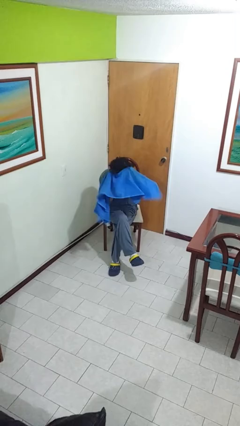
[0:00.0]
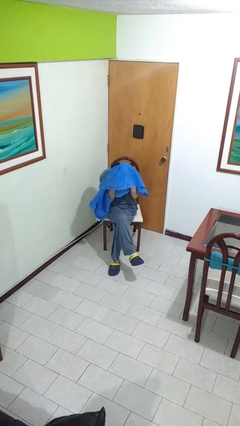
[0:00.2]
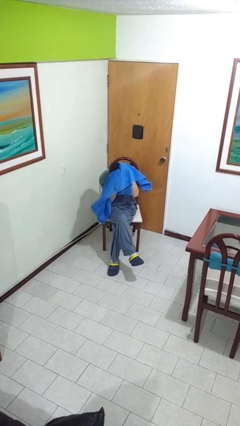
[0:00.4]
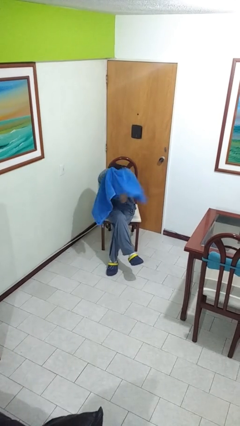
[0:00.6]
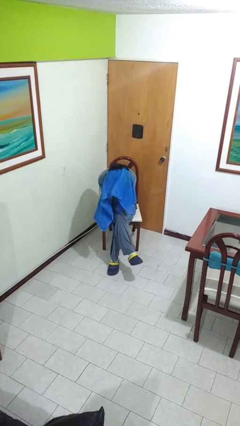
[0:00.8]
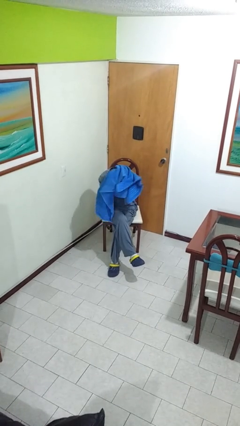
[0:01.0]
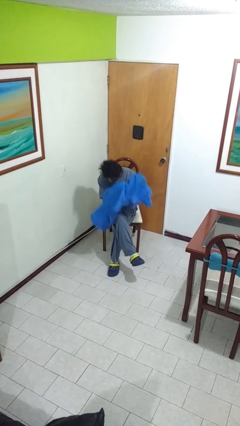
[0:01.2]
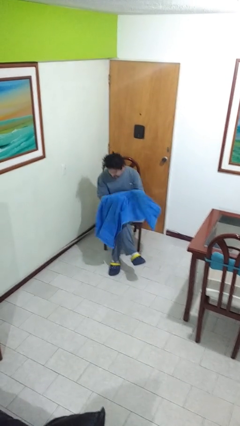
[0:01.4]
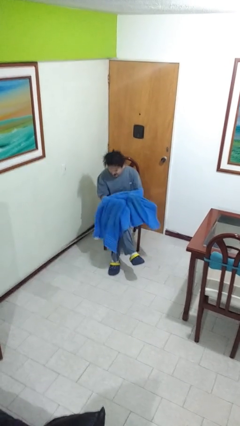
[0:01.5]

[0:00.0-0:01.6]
person dries hair with towel

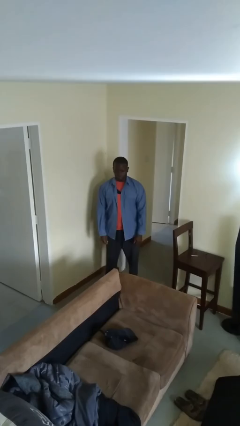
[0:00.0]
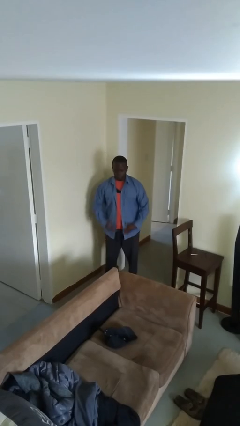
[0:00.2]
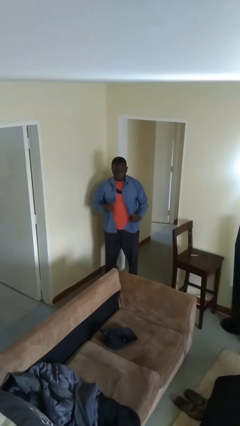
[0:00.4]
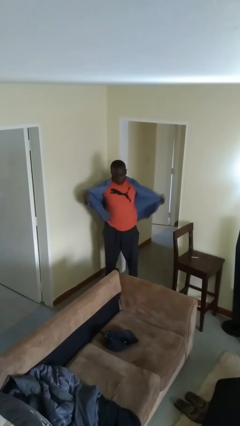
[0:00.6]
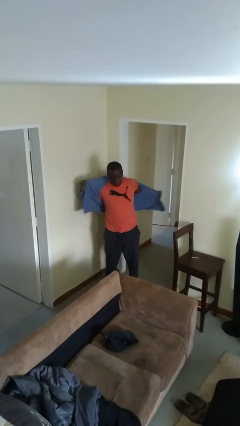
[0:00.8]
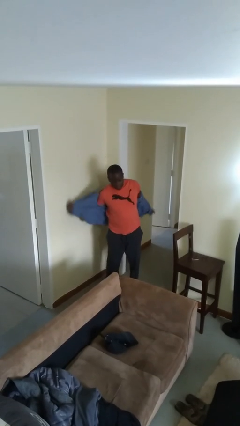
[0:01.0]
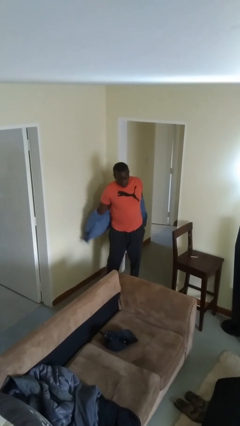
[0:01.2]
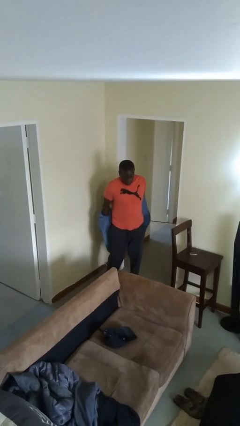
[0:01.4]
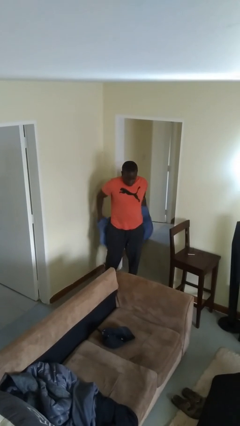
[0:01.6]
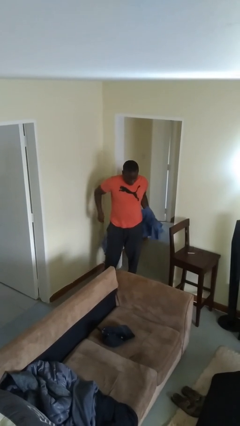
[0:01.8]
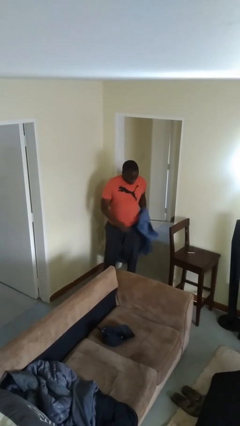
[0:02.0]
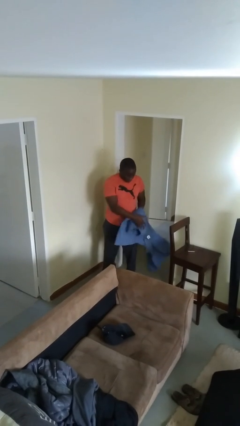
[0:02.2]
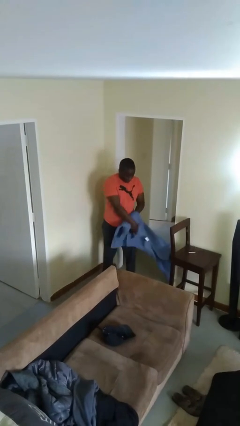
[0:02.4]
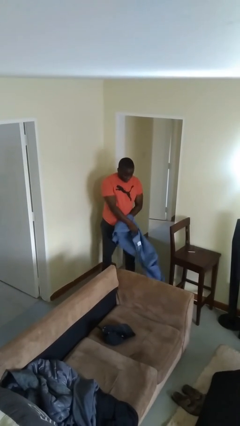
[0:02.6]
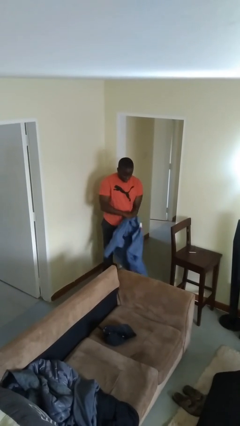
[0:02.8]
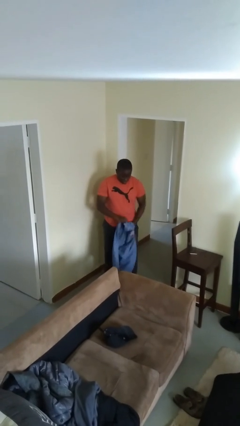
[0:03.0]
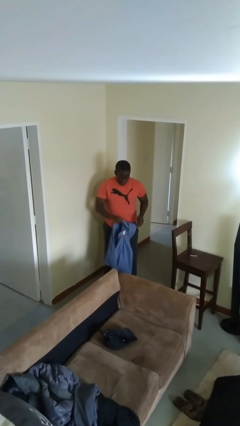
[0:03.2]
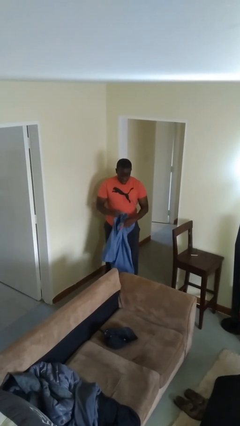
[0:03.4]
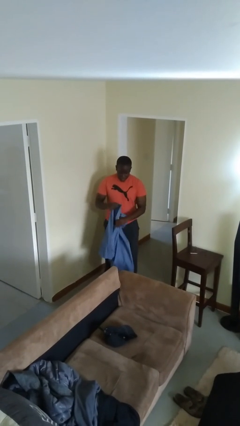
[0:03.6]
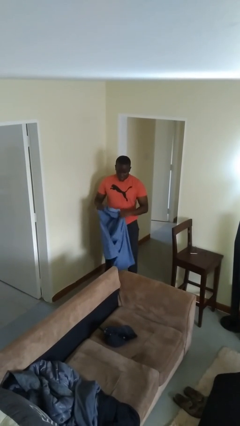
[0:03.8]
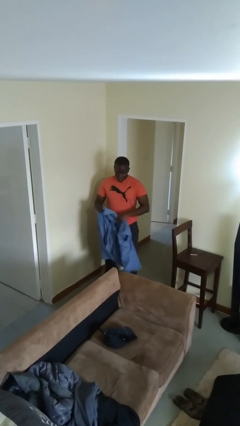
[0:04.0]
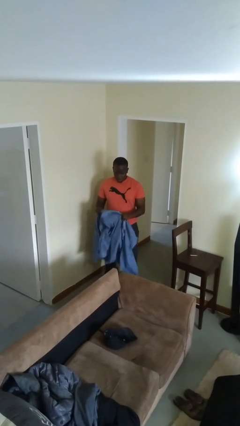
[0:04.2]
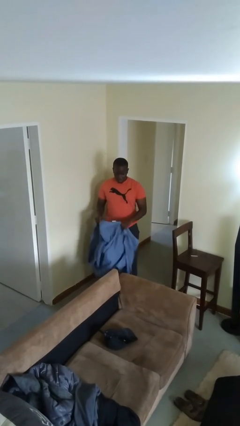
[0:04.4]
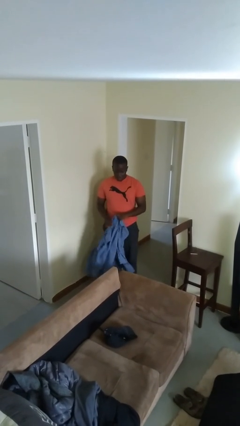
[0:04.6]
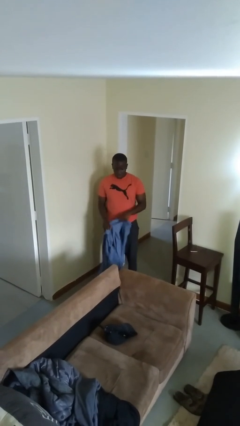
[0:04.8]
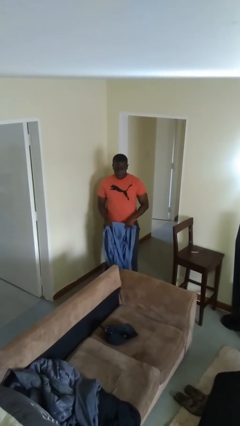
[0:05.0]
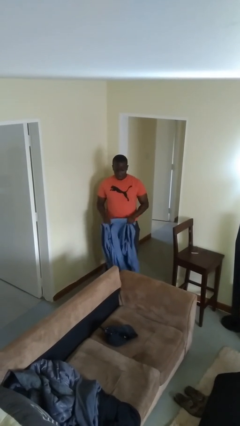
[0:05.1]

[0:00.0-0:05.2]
person takes off shirt

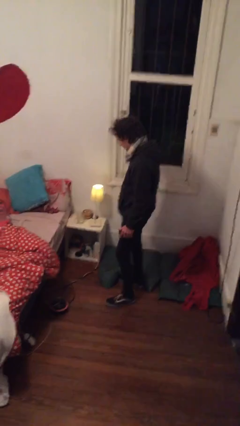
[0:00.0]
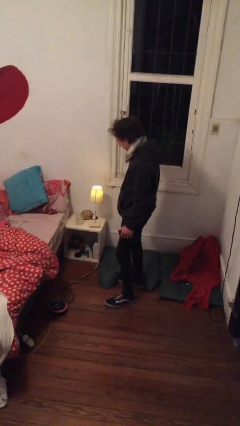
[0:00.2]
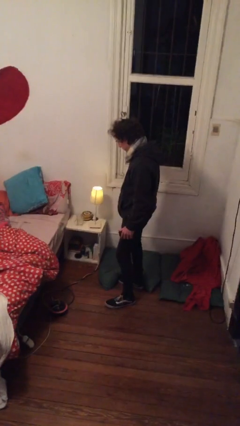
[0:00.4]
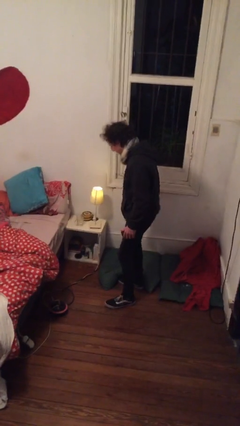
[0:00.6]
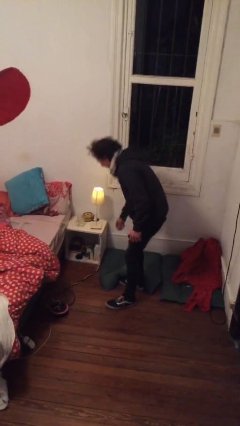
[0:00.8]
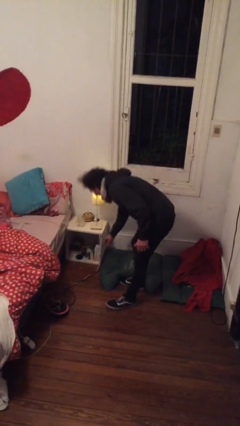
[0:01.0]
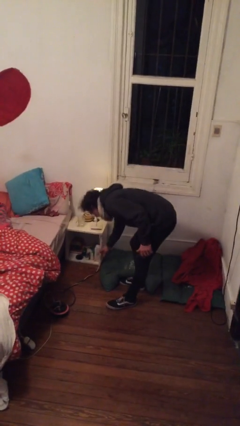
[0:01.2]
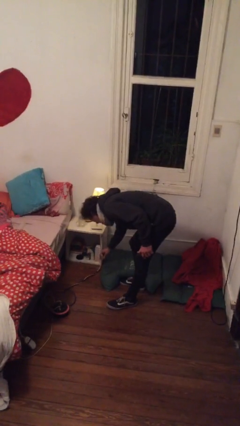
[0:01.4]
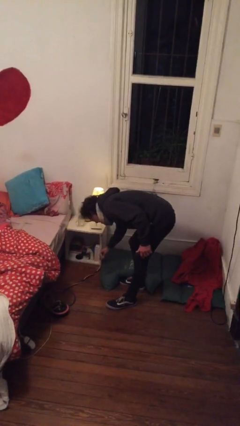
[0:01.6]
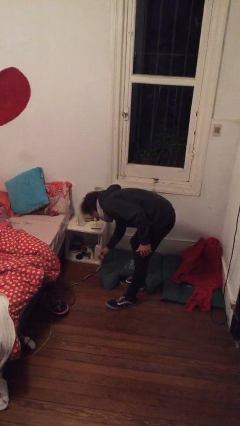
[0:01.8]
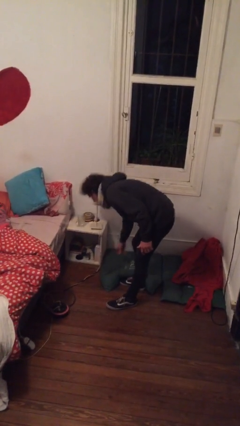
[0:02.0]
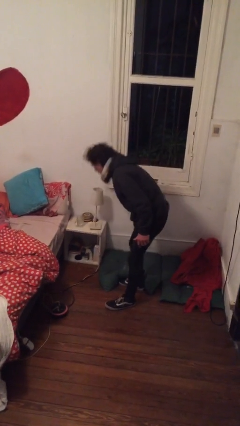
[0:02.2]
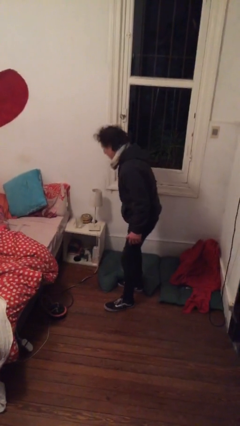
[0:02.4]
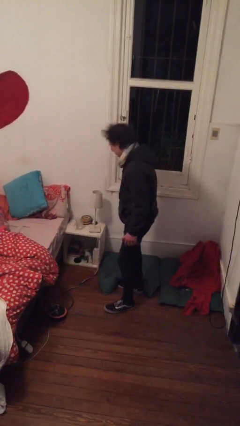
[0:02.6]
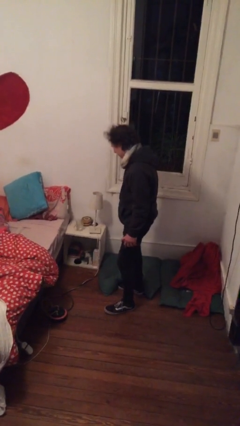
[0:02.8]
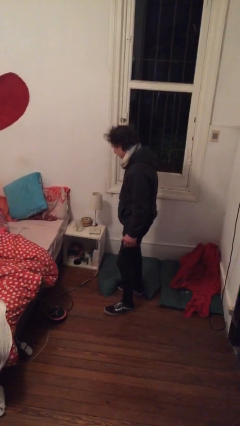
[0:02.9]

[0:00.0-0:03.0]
person turns off lamp

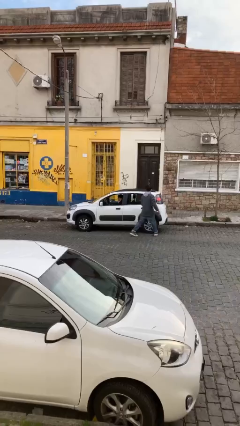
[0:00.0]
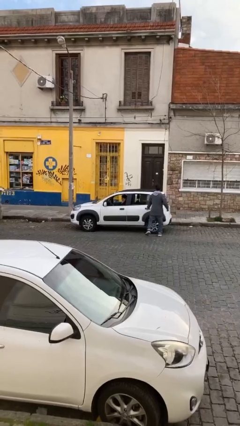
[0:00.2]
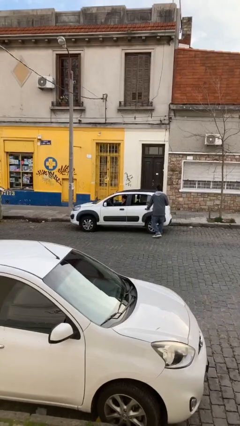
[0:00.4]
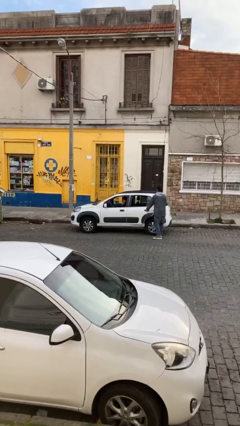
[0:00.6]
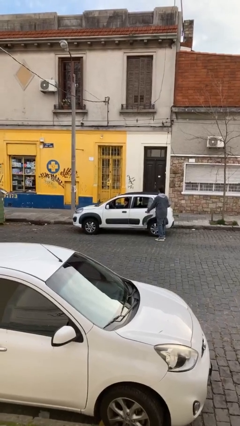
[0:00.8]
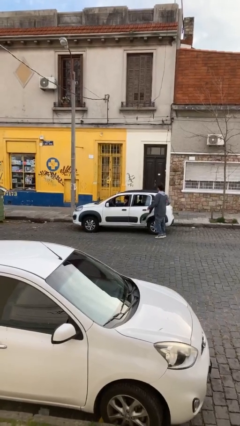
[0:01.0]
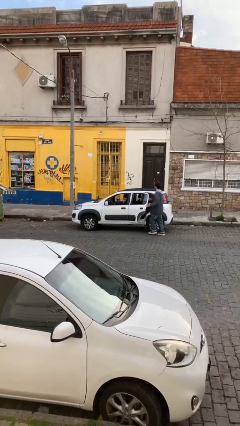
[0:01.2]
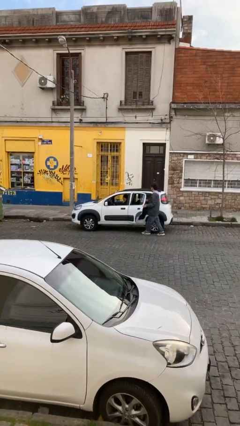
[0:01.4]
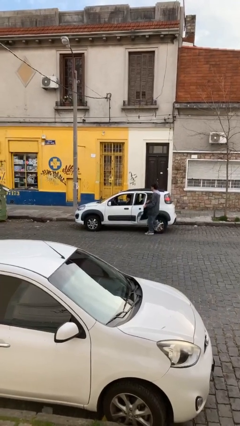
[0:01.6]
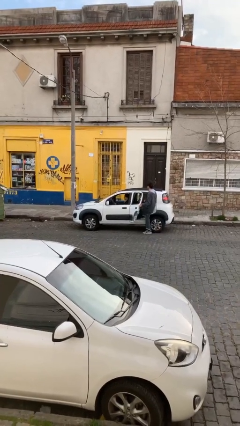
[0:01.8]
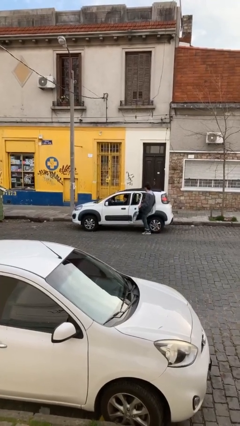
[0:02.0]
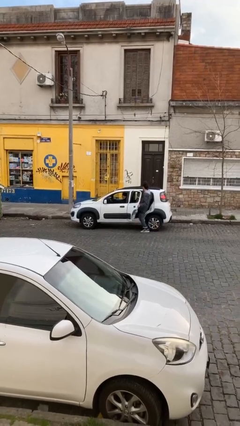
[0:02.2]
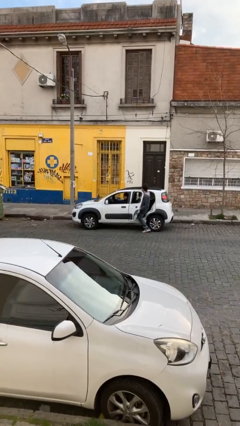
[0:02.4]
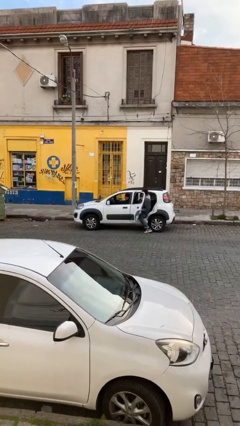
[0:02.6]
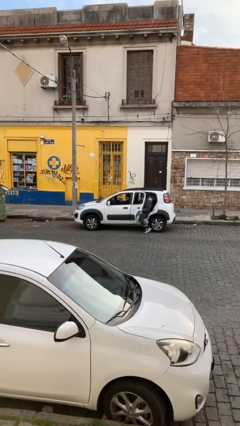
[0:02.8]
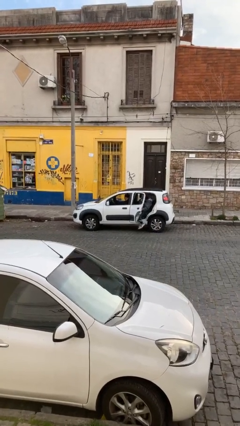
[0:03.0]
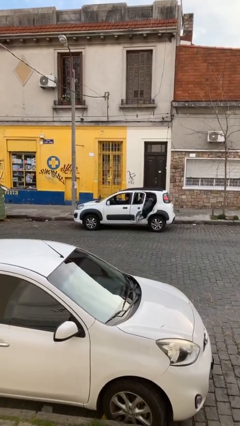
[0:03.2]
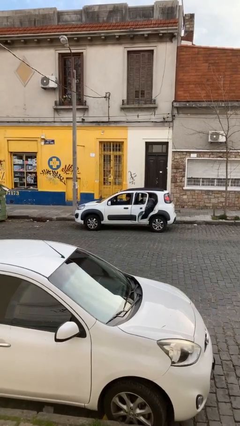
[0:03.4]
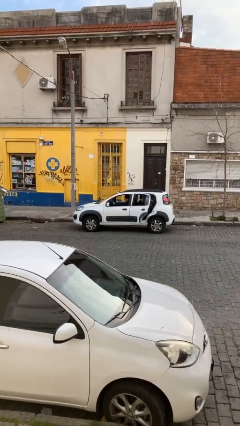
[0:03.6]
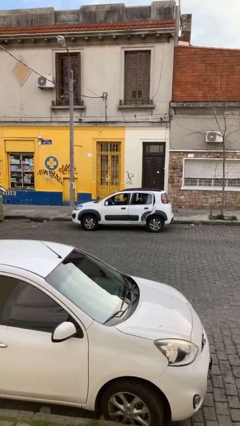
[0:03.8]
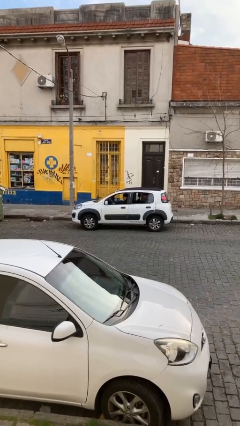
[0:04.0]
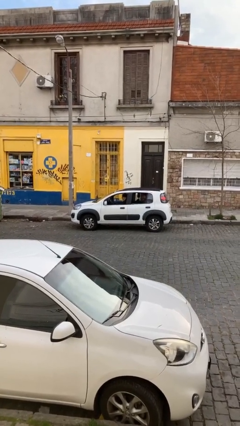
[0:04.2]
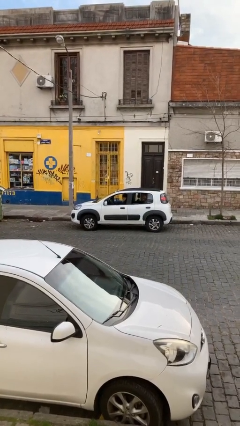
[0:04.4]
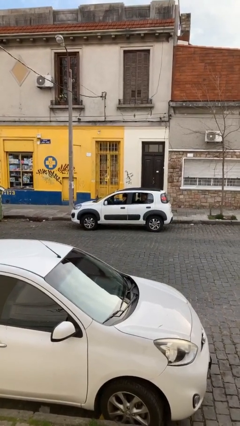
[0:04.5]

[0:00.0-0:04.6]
car picks up person

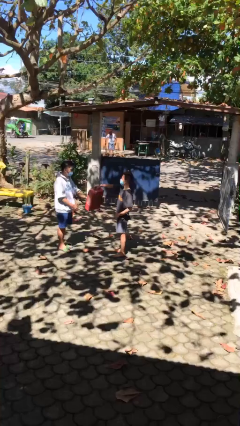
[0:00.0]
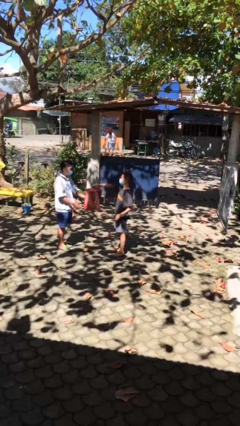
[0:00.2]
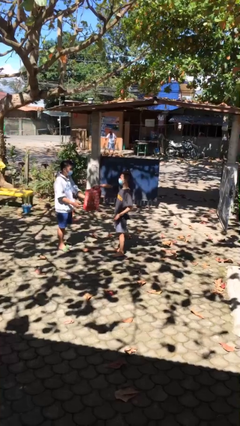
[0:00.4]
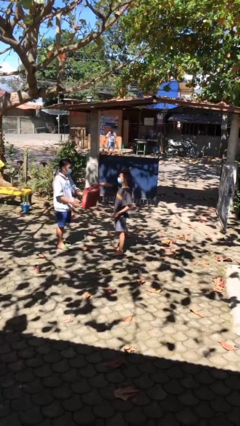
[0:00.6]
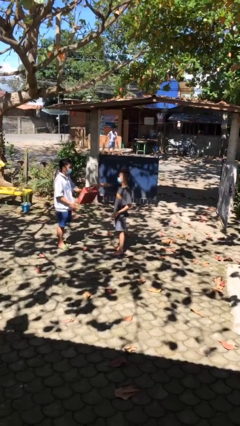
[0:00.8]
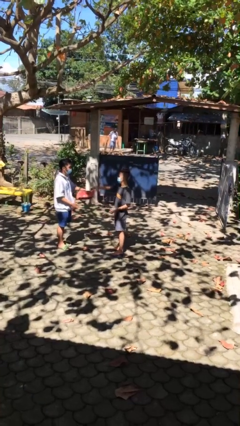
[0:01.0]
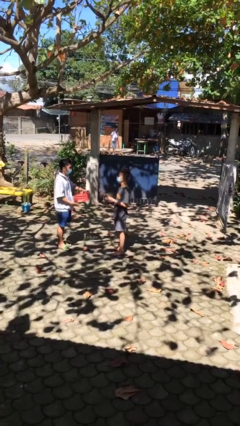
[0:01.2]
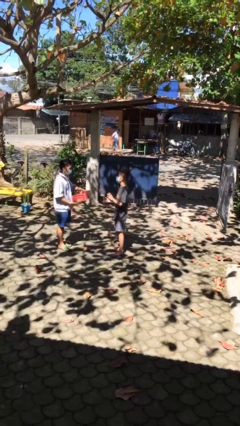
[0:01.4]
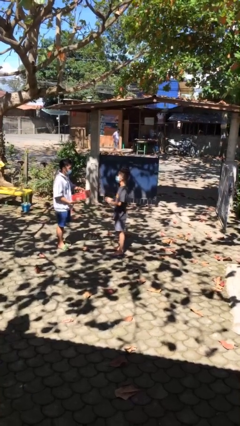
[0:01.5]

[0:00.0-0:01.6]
person transfers object to person

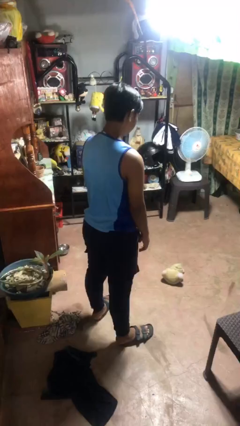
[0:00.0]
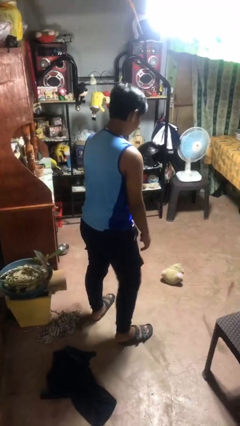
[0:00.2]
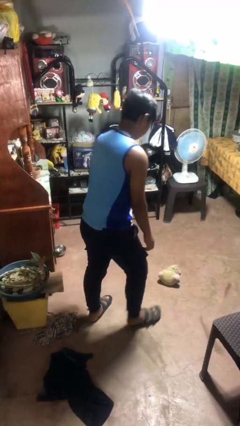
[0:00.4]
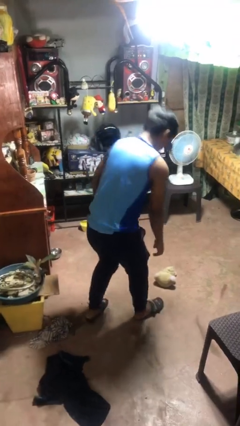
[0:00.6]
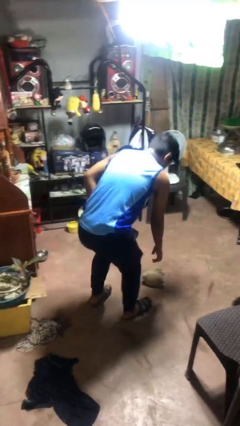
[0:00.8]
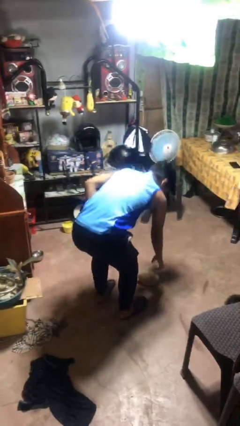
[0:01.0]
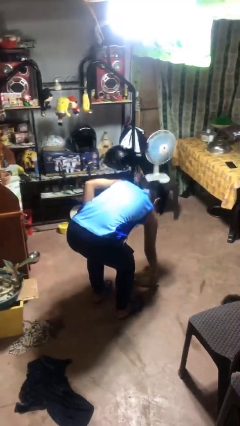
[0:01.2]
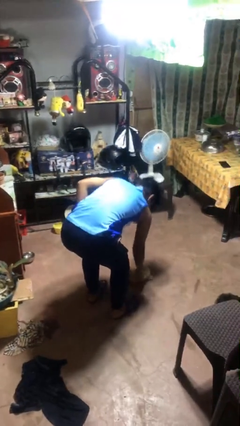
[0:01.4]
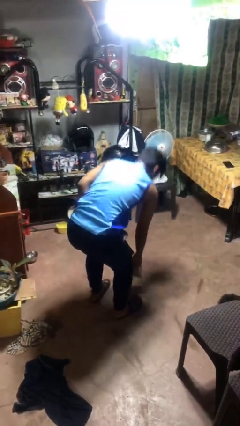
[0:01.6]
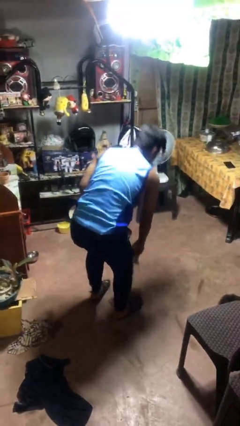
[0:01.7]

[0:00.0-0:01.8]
person picks up object from floor
